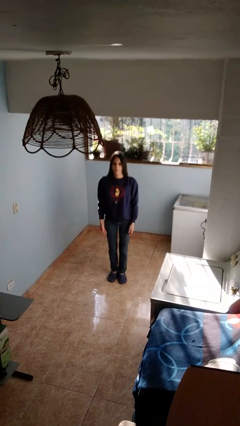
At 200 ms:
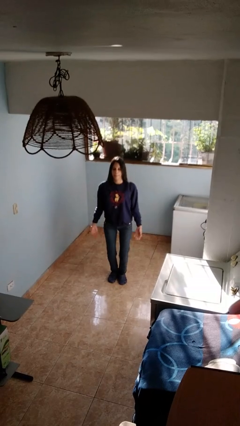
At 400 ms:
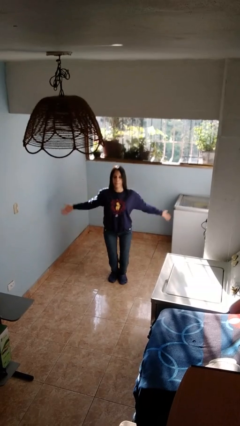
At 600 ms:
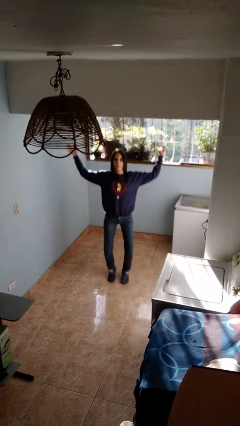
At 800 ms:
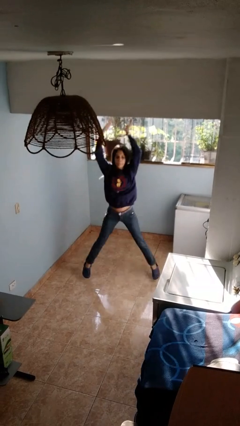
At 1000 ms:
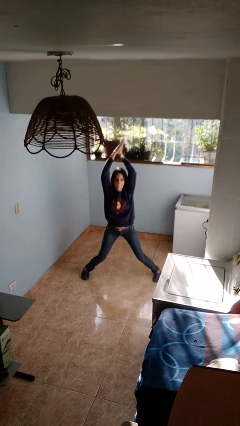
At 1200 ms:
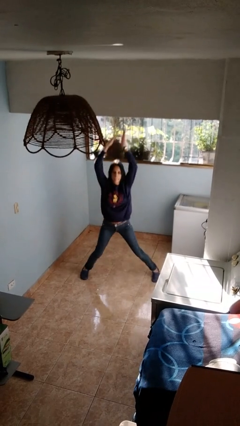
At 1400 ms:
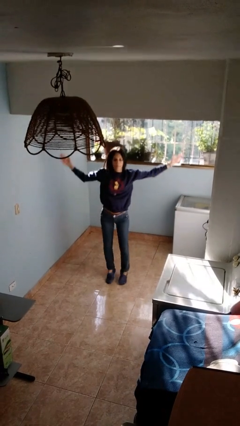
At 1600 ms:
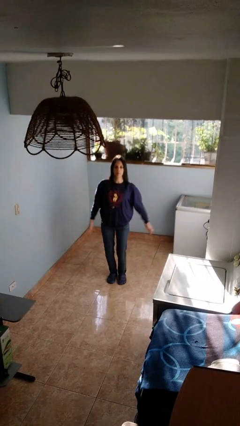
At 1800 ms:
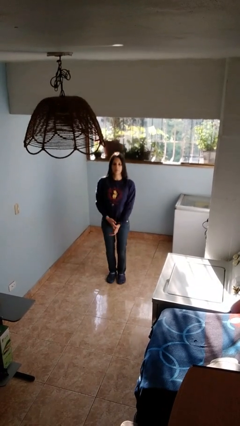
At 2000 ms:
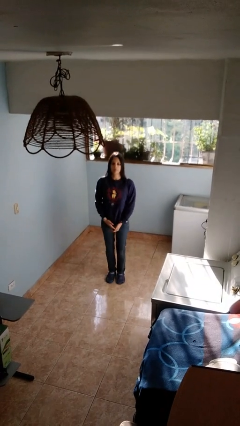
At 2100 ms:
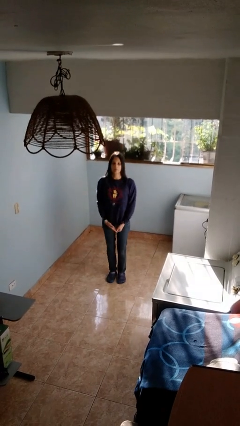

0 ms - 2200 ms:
person exercises with jumping jacks

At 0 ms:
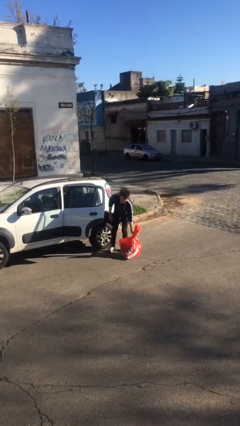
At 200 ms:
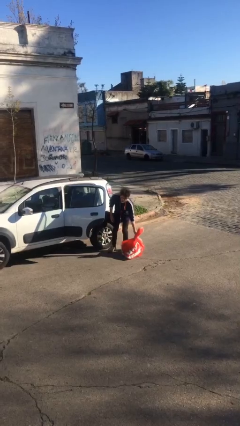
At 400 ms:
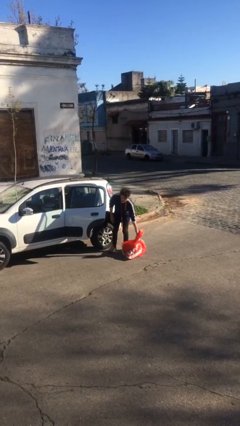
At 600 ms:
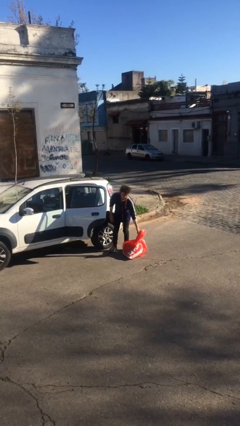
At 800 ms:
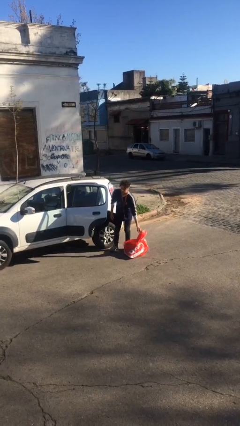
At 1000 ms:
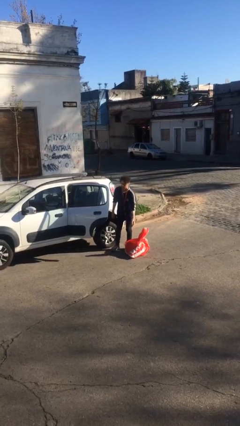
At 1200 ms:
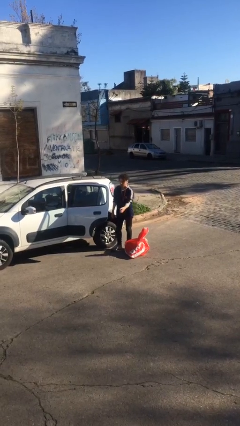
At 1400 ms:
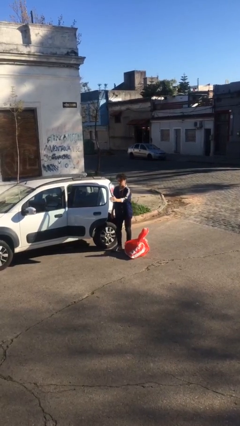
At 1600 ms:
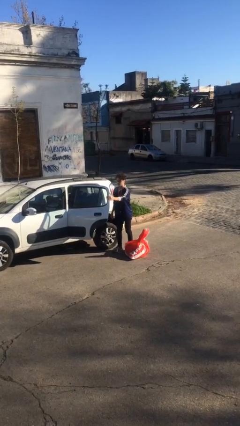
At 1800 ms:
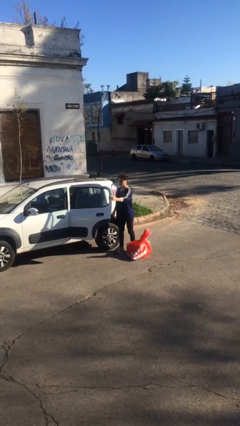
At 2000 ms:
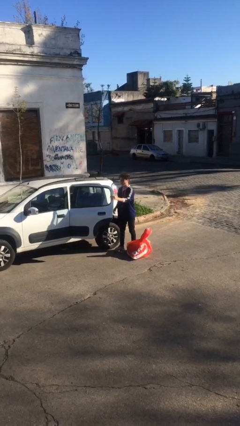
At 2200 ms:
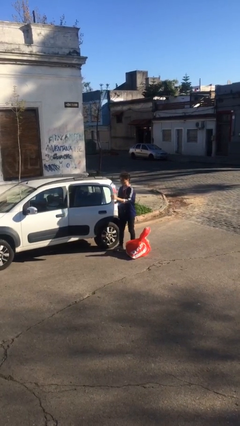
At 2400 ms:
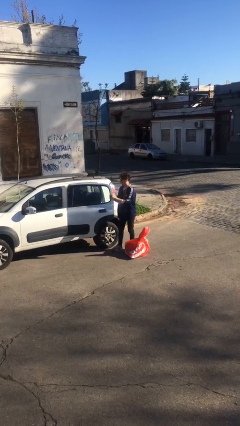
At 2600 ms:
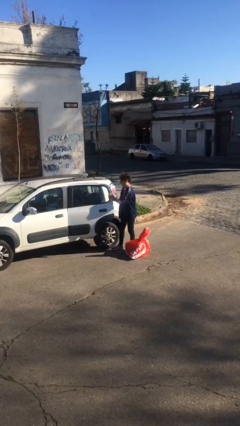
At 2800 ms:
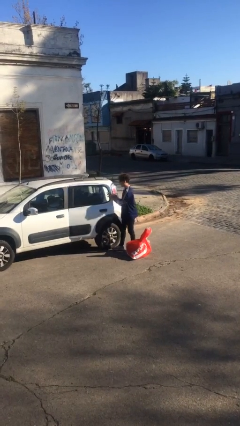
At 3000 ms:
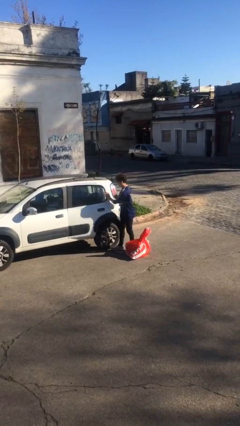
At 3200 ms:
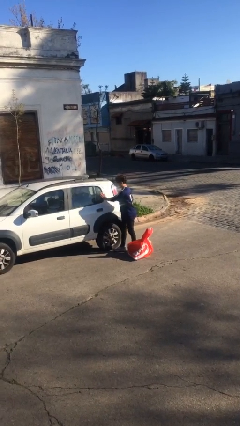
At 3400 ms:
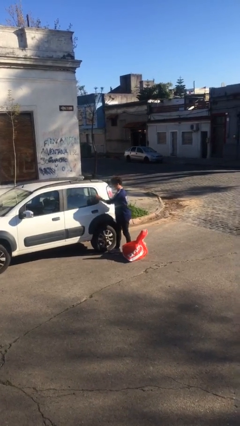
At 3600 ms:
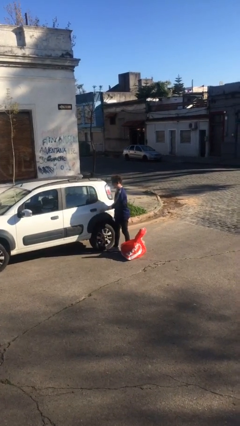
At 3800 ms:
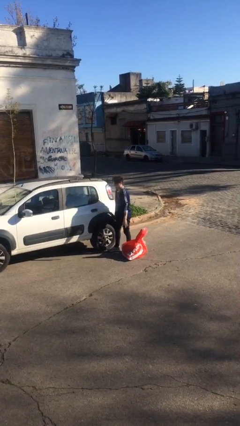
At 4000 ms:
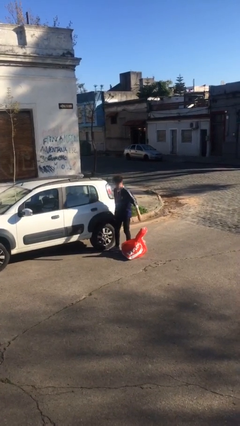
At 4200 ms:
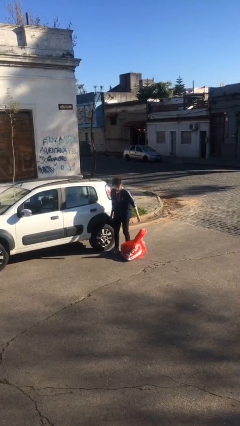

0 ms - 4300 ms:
person closes car door

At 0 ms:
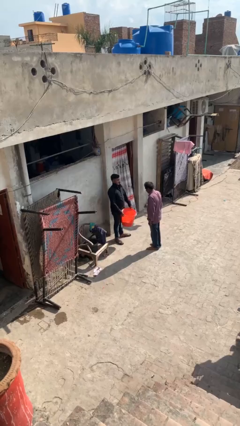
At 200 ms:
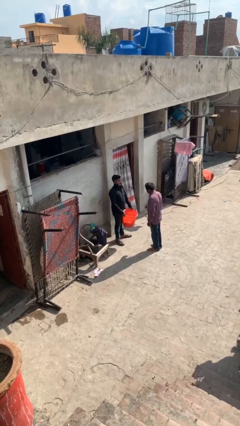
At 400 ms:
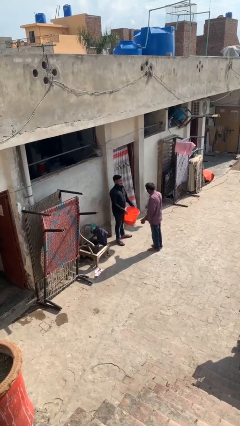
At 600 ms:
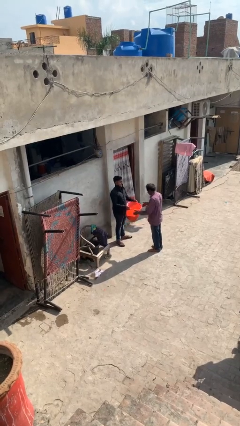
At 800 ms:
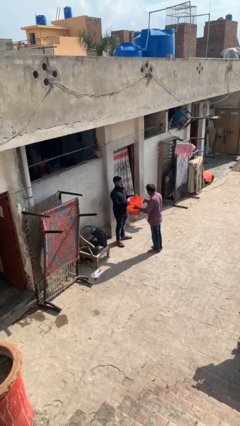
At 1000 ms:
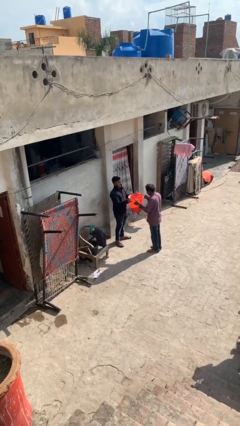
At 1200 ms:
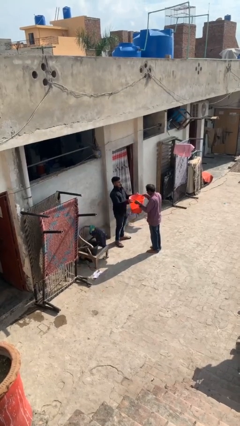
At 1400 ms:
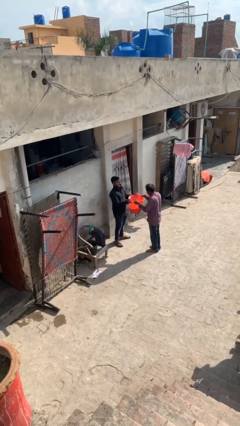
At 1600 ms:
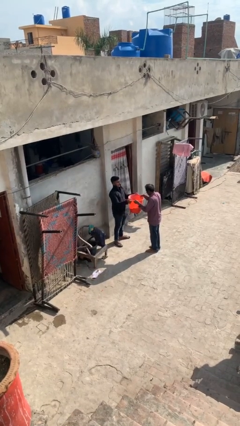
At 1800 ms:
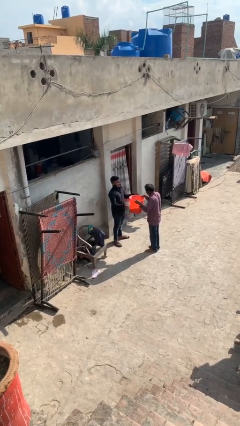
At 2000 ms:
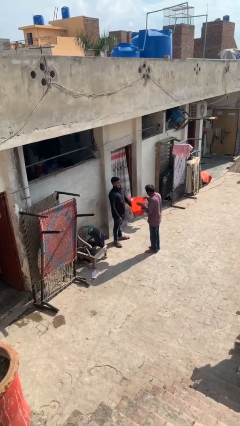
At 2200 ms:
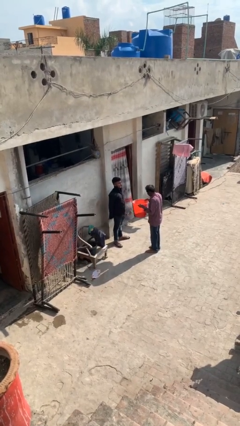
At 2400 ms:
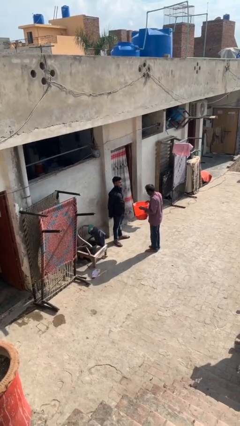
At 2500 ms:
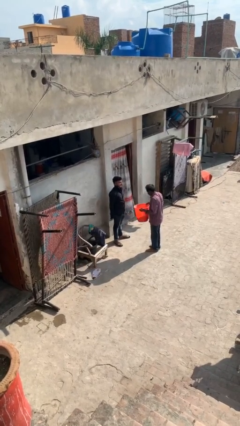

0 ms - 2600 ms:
person transfers object to person

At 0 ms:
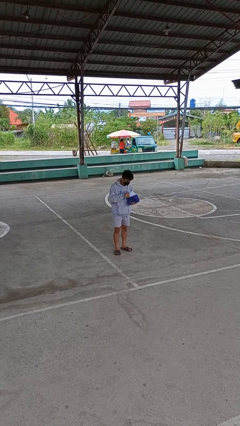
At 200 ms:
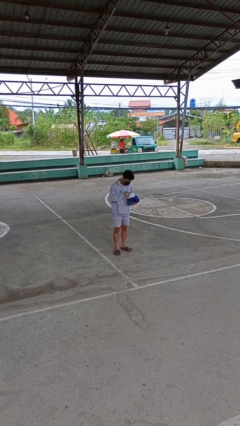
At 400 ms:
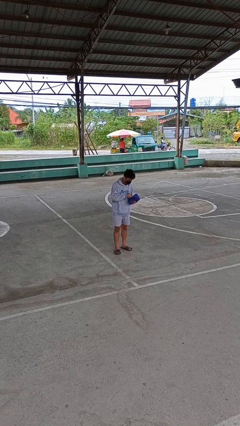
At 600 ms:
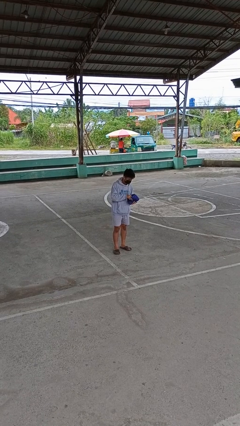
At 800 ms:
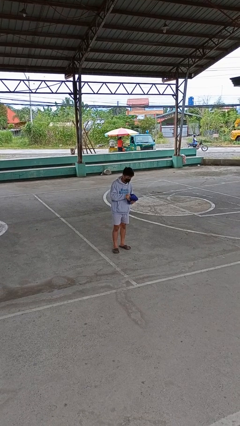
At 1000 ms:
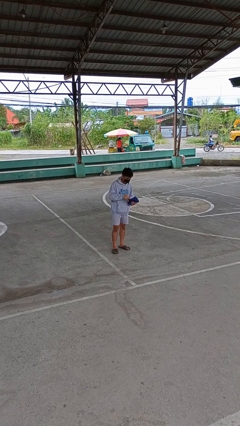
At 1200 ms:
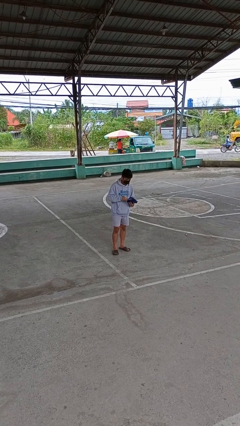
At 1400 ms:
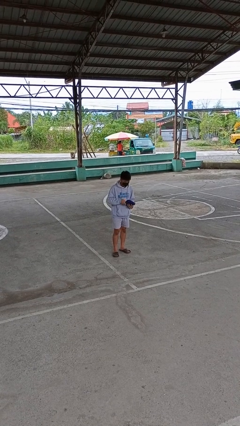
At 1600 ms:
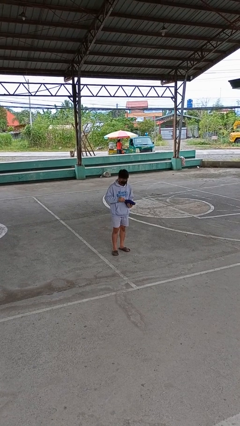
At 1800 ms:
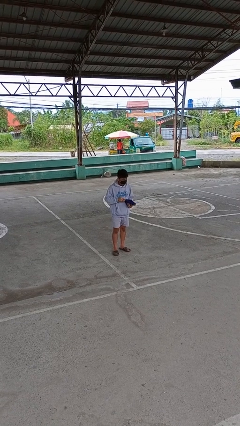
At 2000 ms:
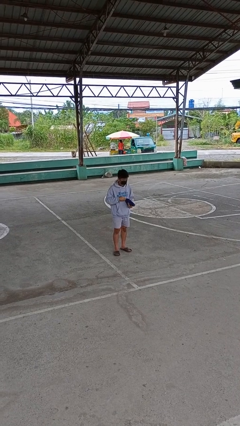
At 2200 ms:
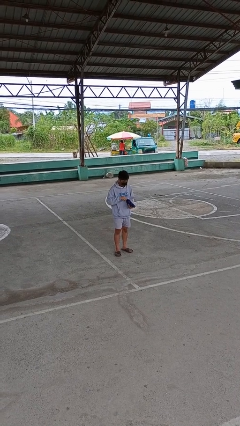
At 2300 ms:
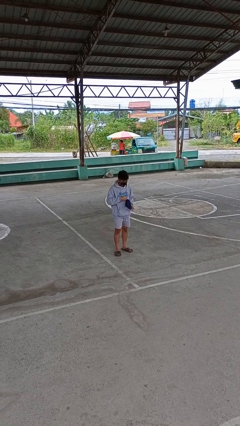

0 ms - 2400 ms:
person puts object into purse

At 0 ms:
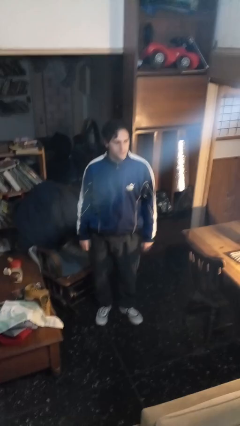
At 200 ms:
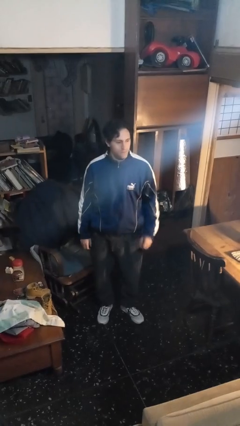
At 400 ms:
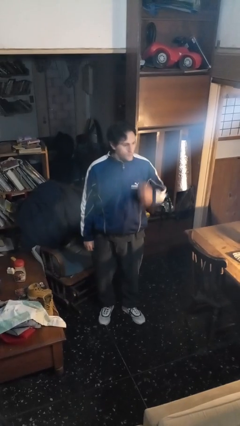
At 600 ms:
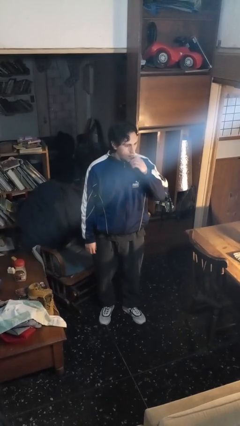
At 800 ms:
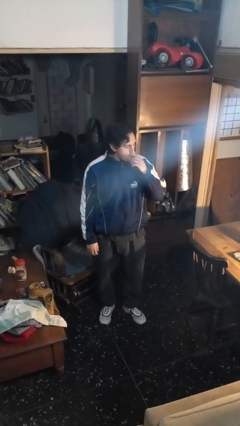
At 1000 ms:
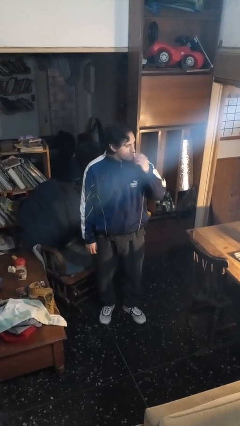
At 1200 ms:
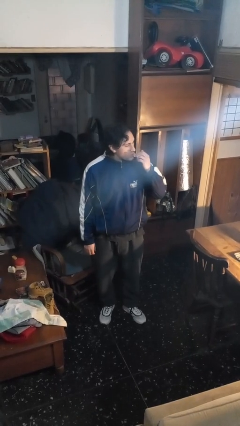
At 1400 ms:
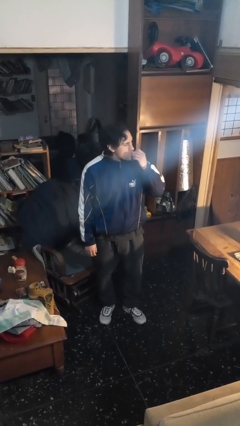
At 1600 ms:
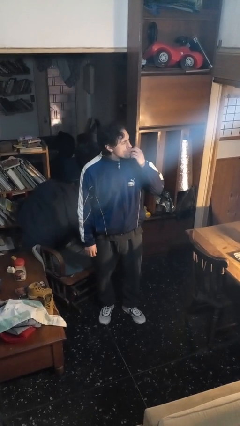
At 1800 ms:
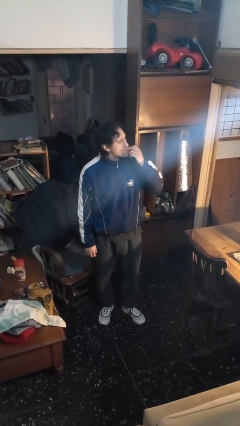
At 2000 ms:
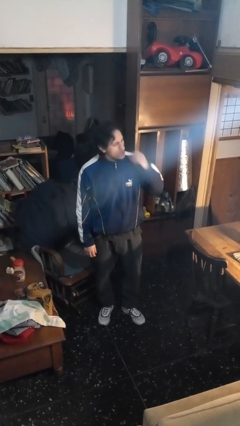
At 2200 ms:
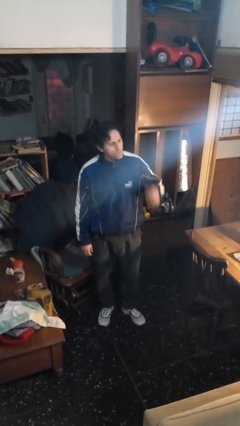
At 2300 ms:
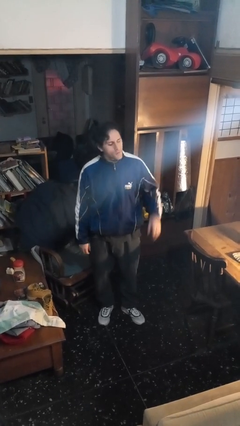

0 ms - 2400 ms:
person licks fingers

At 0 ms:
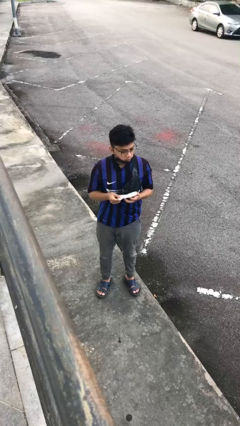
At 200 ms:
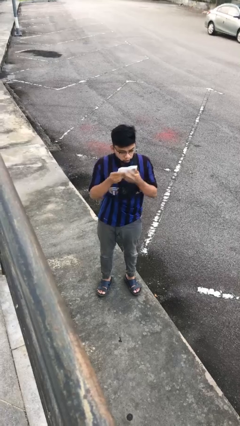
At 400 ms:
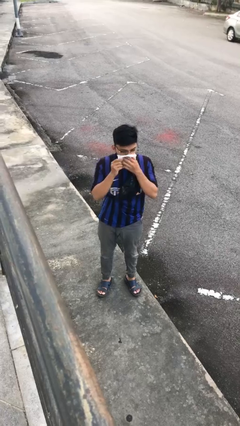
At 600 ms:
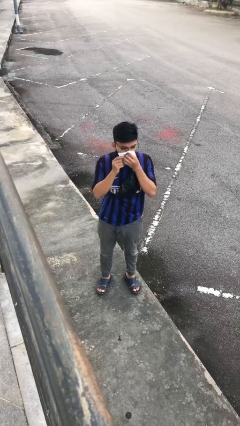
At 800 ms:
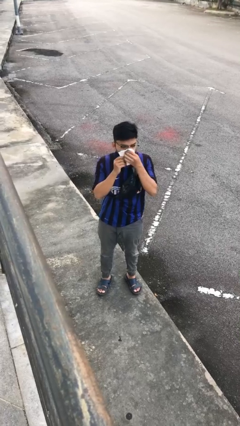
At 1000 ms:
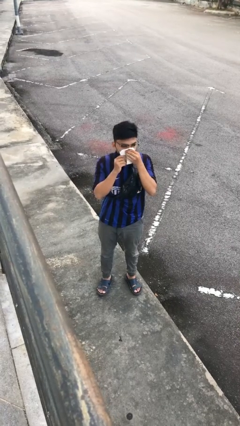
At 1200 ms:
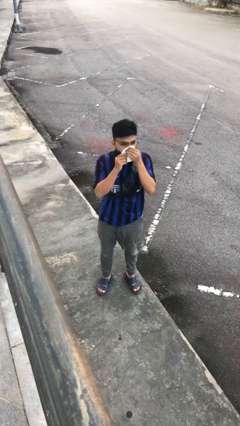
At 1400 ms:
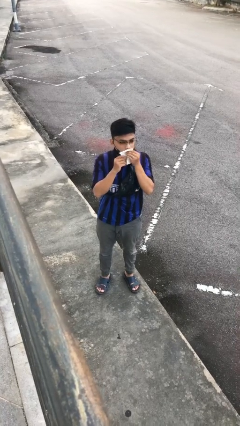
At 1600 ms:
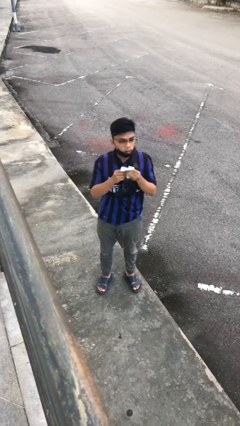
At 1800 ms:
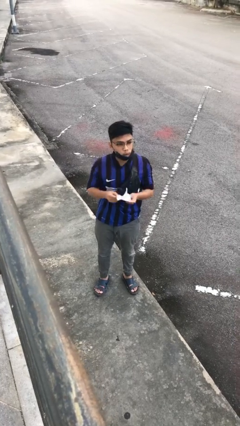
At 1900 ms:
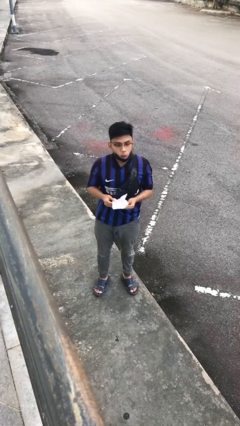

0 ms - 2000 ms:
person blows nose

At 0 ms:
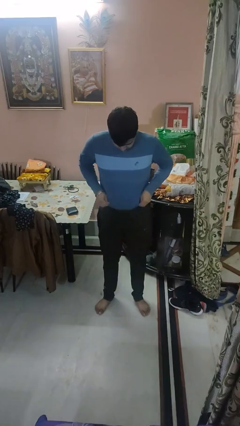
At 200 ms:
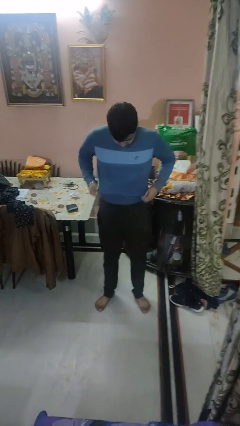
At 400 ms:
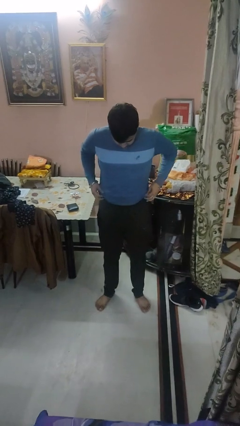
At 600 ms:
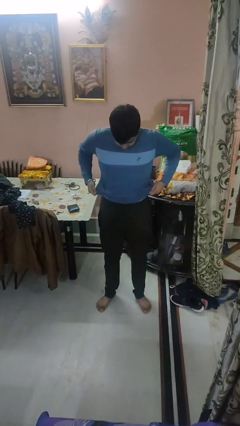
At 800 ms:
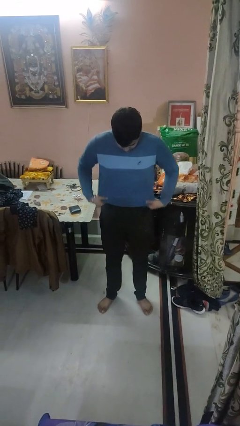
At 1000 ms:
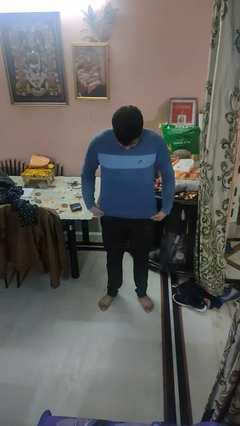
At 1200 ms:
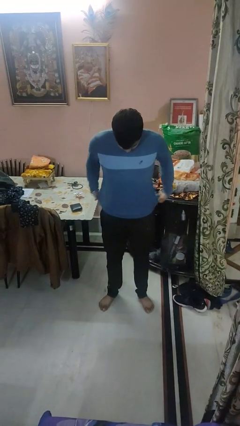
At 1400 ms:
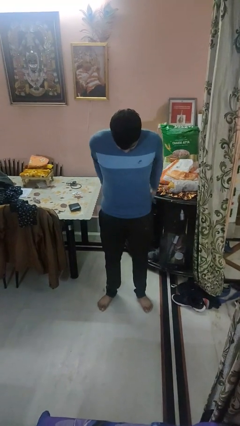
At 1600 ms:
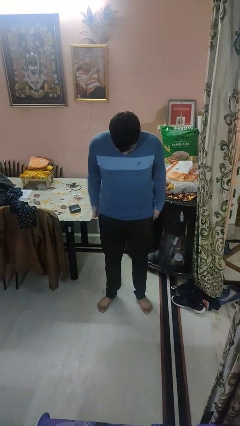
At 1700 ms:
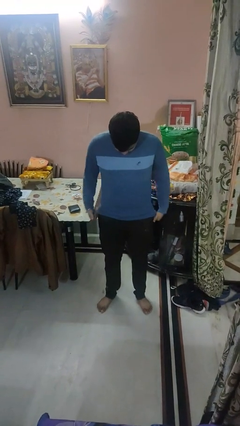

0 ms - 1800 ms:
person untucks shirt
